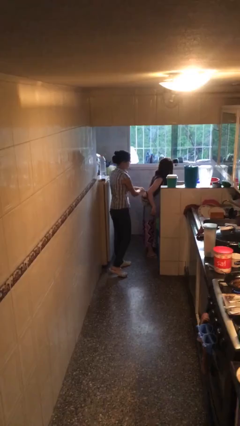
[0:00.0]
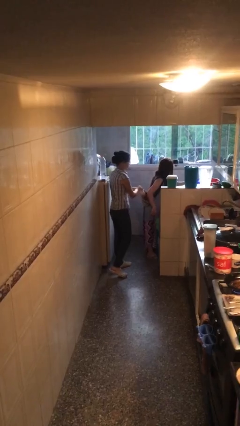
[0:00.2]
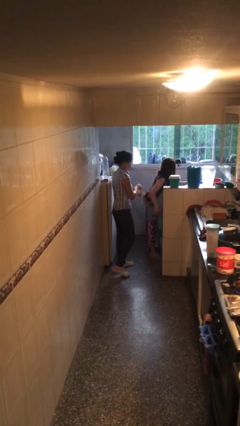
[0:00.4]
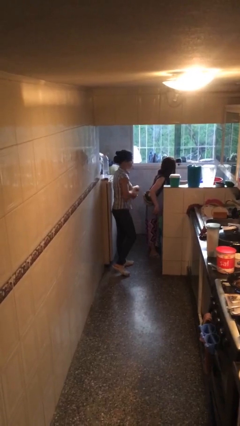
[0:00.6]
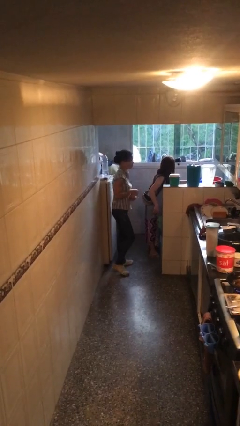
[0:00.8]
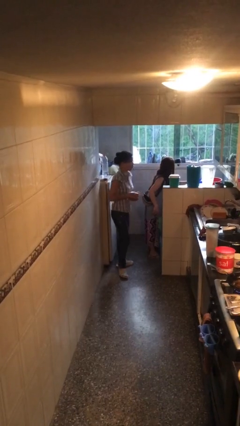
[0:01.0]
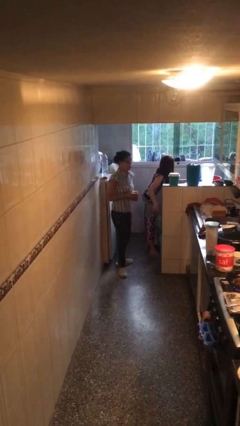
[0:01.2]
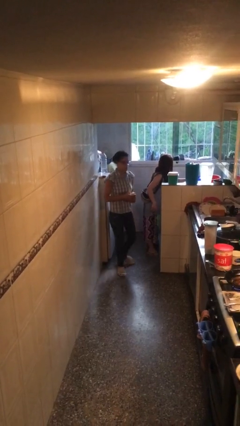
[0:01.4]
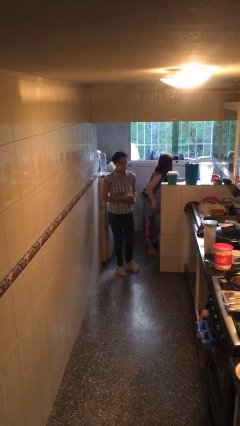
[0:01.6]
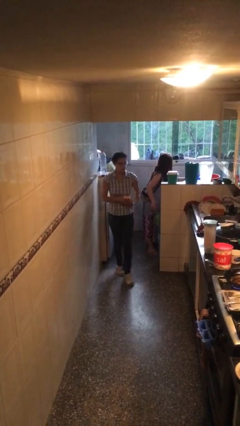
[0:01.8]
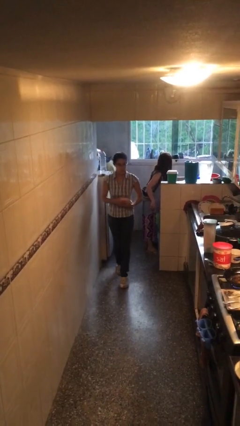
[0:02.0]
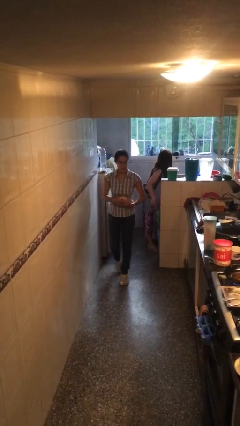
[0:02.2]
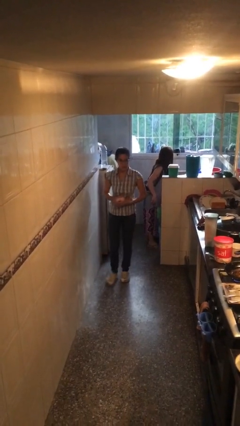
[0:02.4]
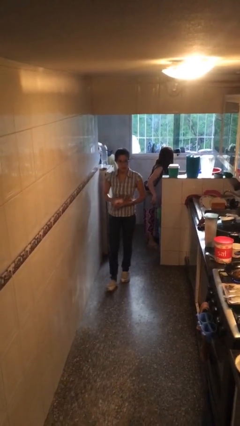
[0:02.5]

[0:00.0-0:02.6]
person steals object from person

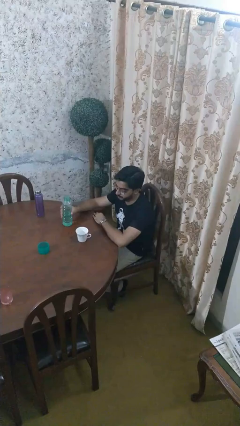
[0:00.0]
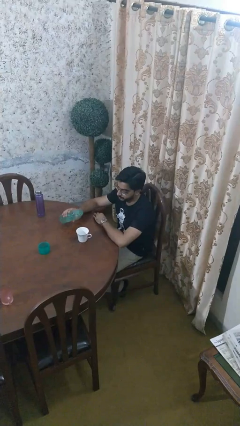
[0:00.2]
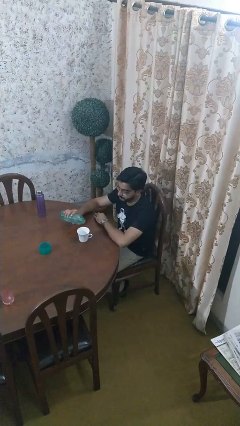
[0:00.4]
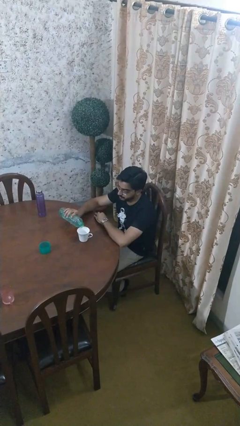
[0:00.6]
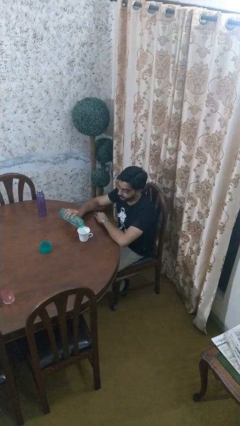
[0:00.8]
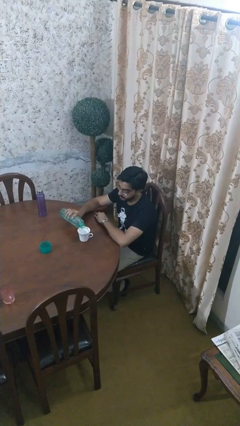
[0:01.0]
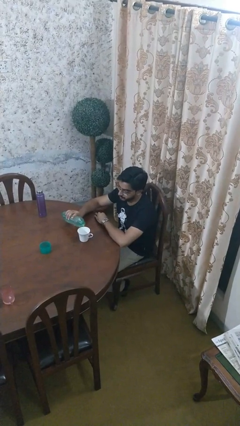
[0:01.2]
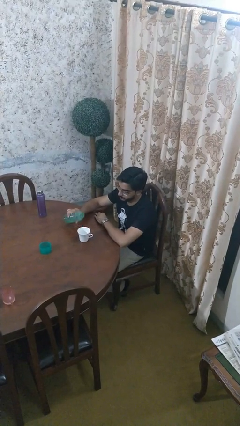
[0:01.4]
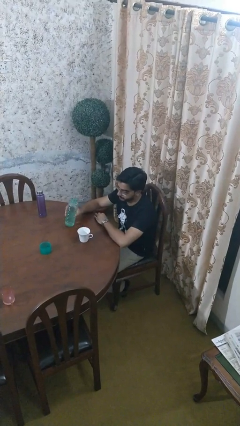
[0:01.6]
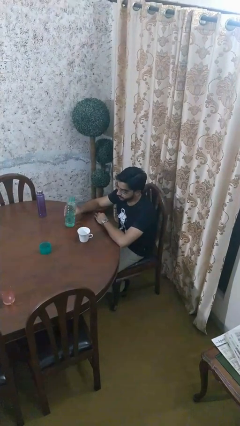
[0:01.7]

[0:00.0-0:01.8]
person pours liquid into cup

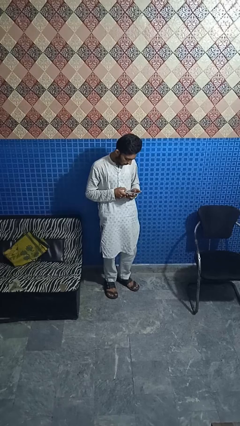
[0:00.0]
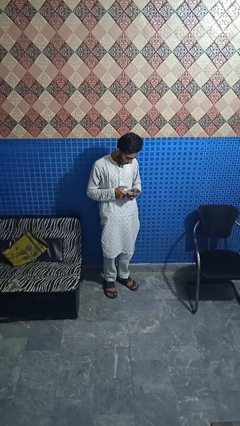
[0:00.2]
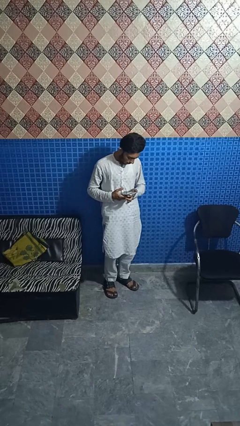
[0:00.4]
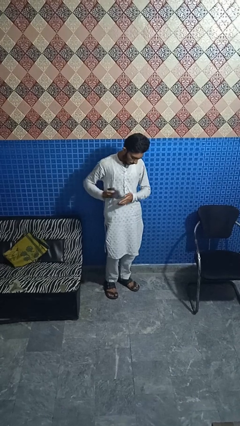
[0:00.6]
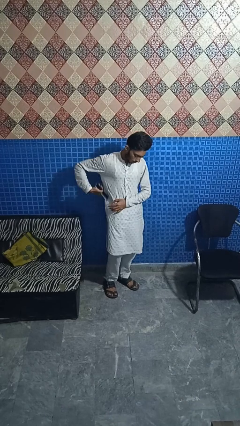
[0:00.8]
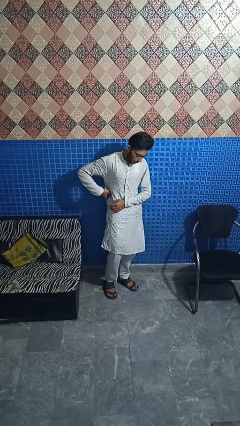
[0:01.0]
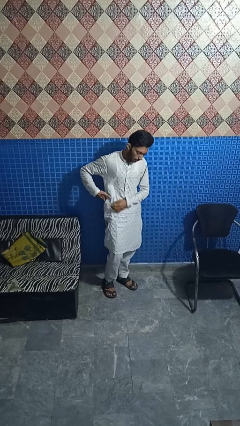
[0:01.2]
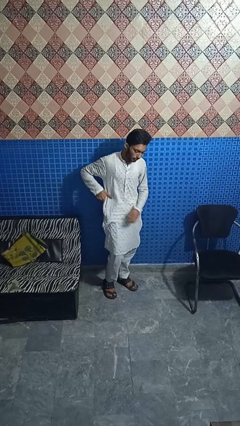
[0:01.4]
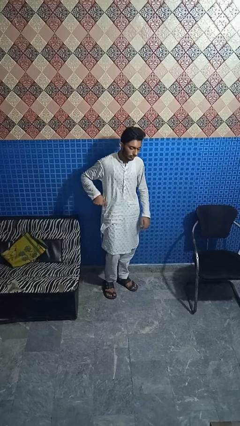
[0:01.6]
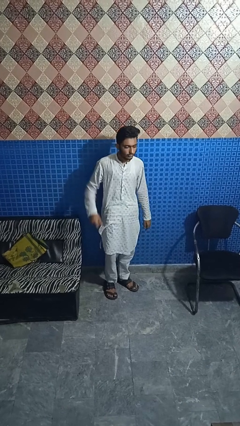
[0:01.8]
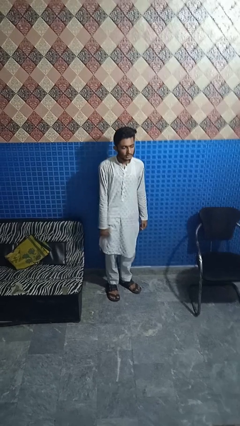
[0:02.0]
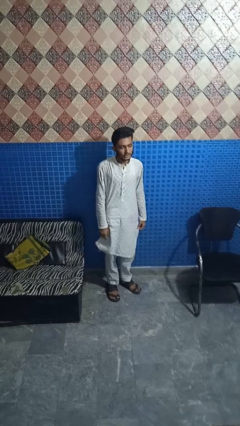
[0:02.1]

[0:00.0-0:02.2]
person puts phone into pocket

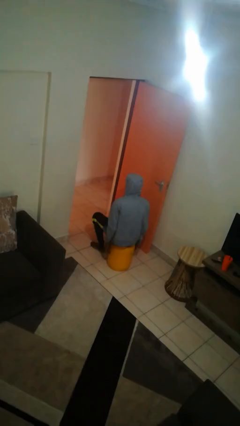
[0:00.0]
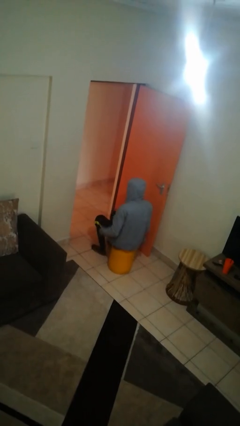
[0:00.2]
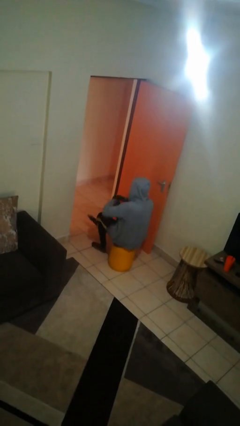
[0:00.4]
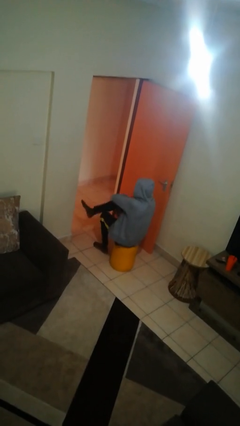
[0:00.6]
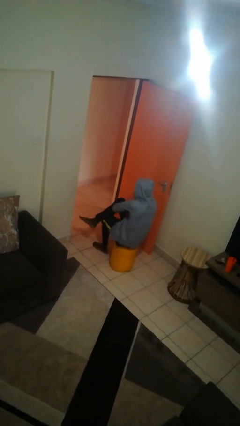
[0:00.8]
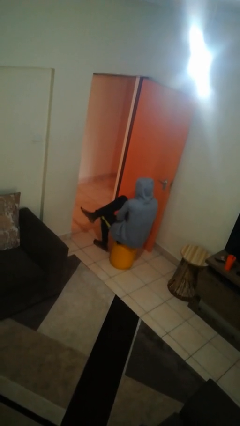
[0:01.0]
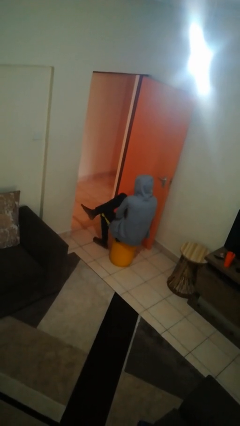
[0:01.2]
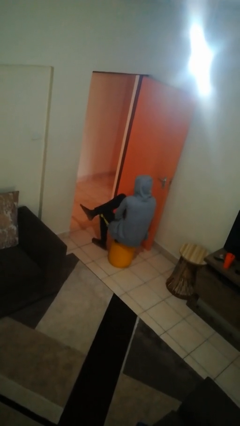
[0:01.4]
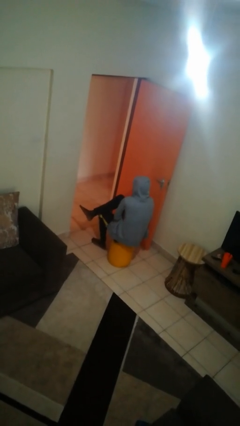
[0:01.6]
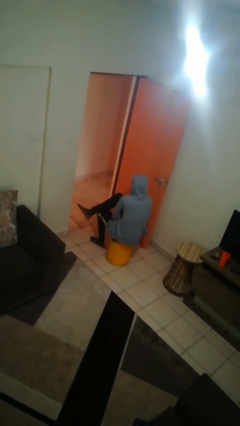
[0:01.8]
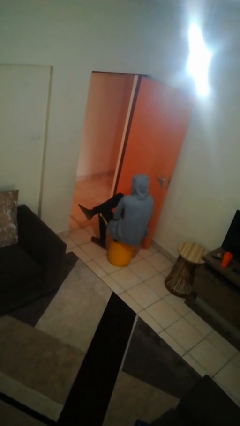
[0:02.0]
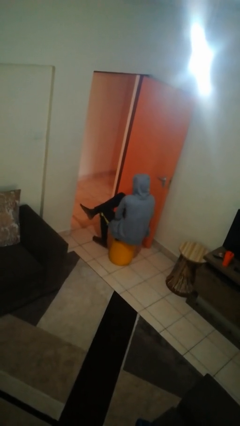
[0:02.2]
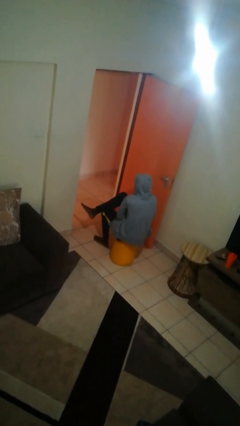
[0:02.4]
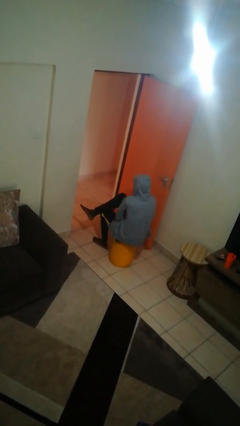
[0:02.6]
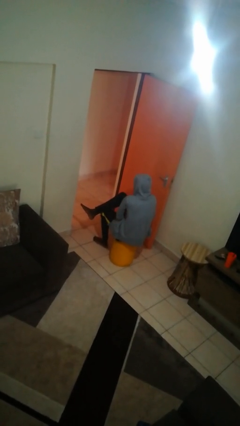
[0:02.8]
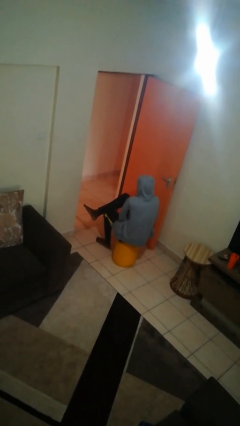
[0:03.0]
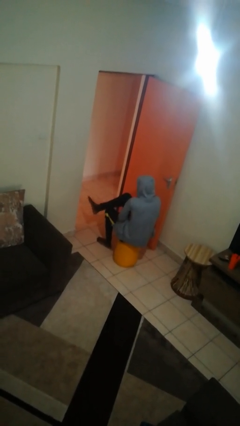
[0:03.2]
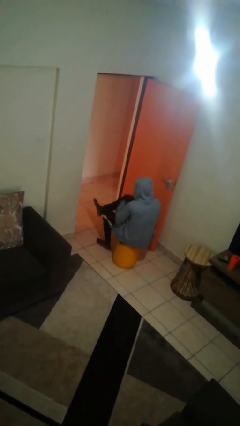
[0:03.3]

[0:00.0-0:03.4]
person crosses arms

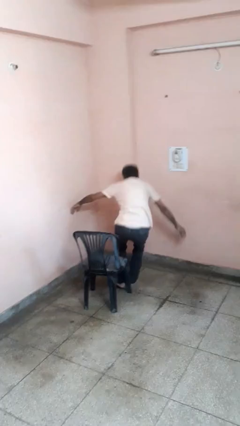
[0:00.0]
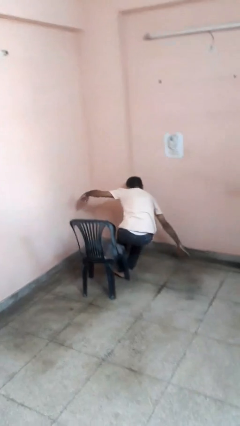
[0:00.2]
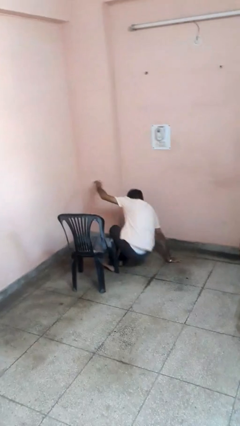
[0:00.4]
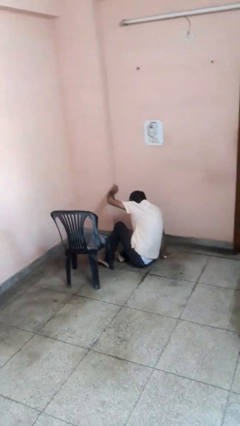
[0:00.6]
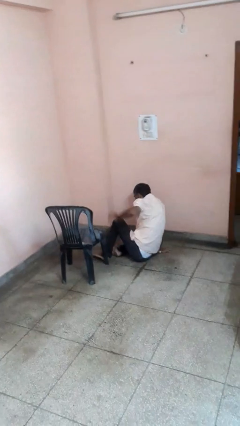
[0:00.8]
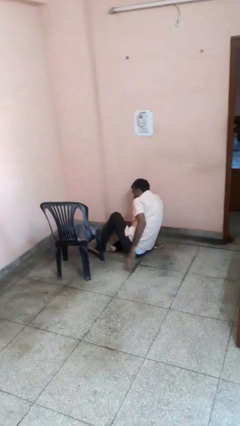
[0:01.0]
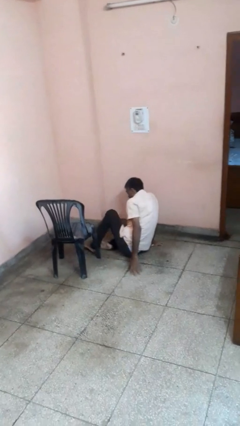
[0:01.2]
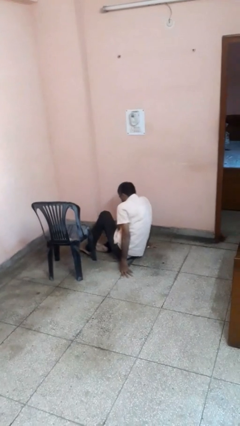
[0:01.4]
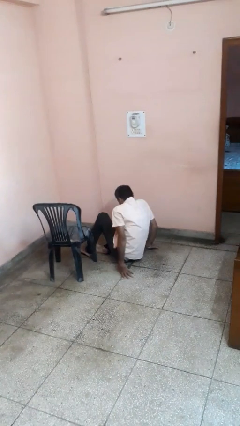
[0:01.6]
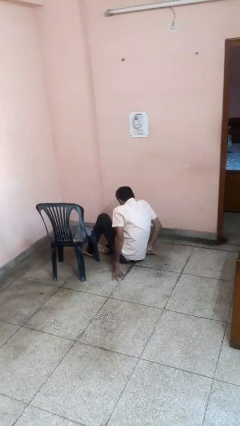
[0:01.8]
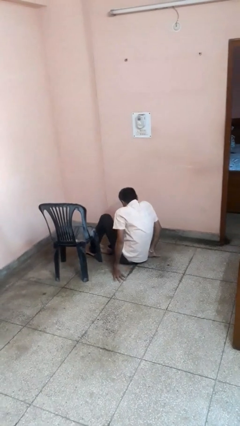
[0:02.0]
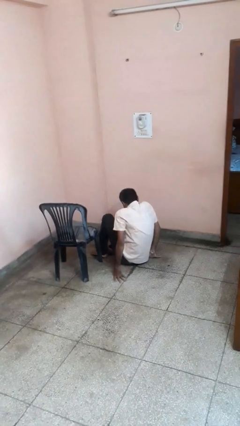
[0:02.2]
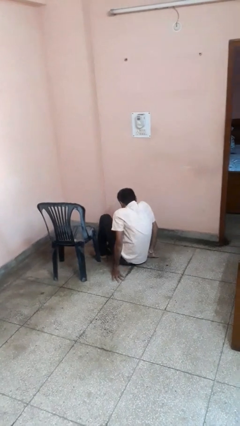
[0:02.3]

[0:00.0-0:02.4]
person falls from chair

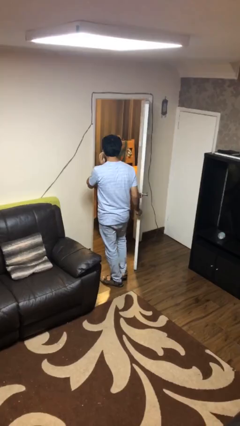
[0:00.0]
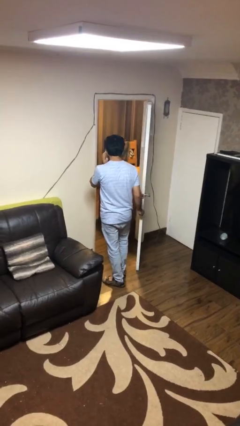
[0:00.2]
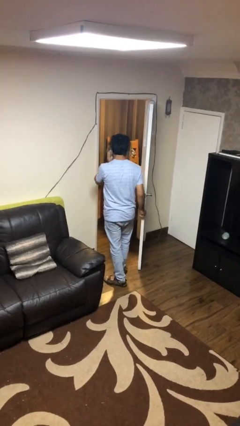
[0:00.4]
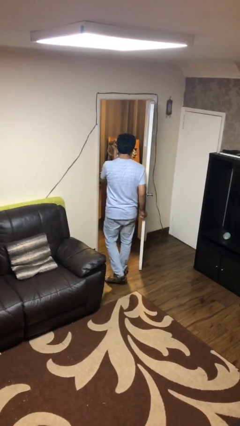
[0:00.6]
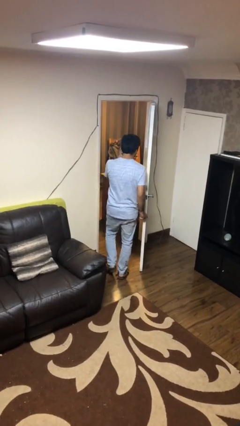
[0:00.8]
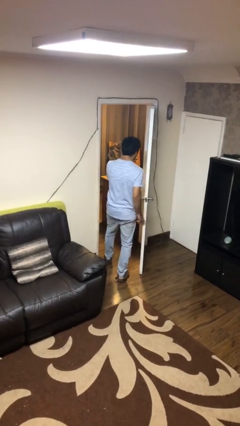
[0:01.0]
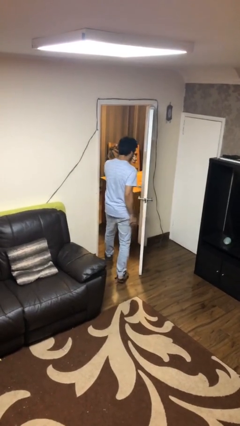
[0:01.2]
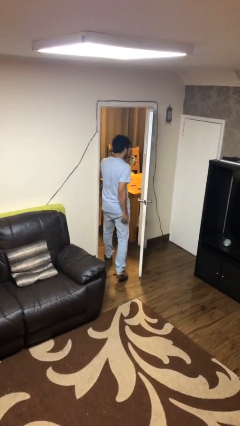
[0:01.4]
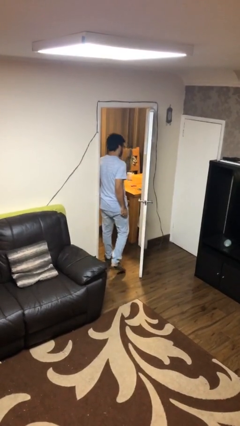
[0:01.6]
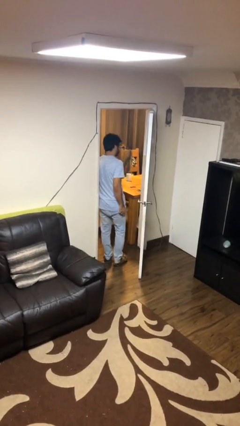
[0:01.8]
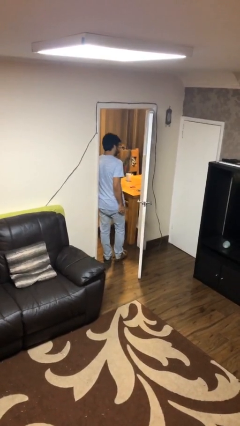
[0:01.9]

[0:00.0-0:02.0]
person exits scene through structure

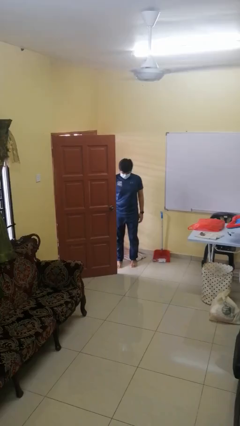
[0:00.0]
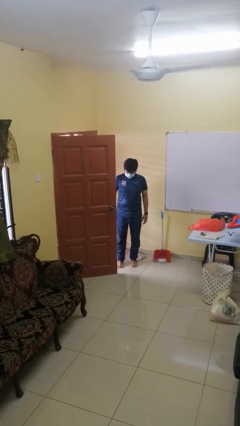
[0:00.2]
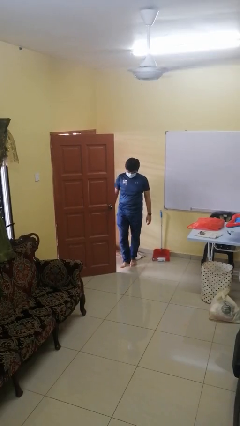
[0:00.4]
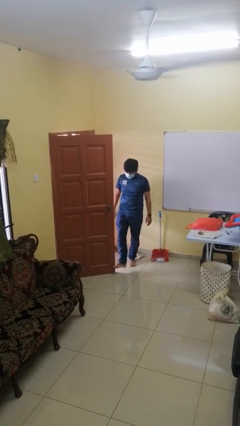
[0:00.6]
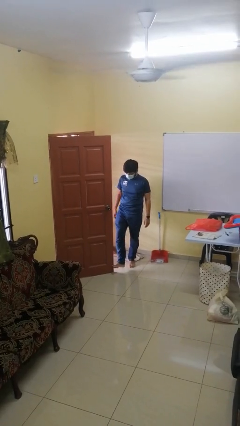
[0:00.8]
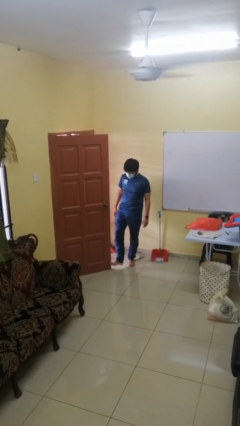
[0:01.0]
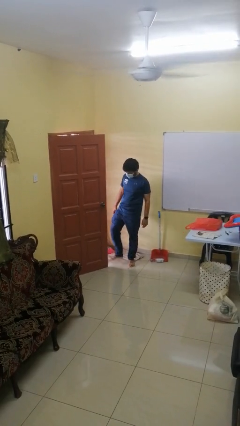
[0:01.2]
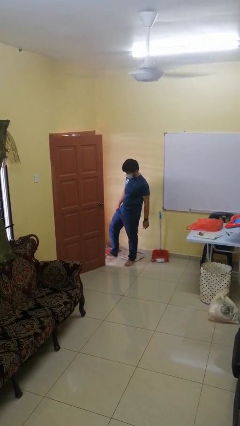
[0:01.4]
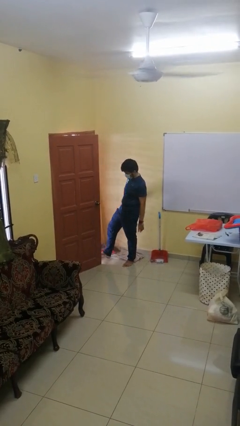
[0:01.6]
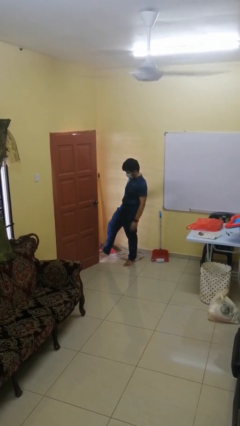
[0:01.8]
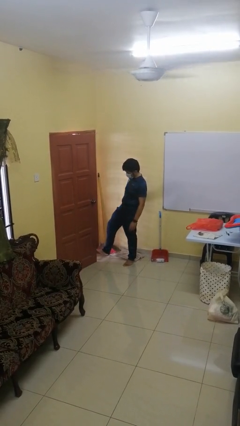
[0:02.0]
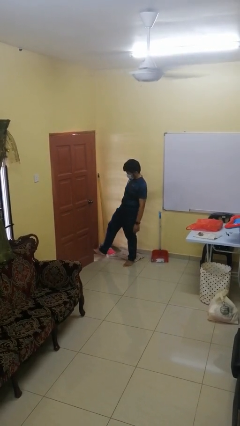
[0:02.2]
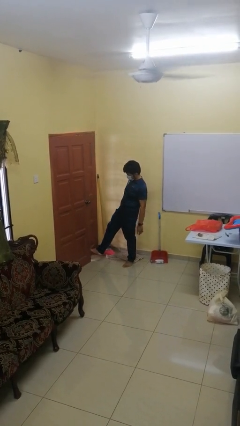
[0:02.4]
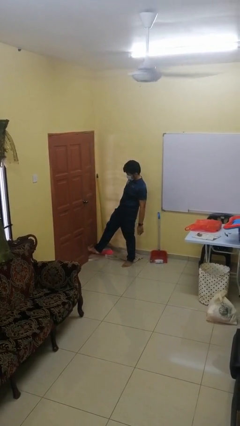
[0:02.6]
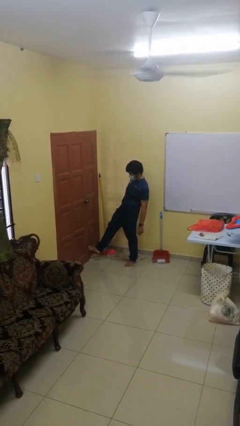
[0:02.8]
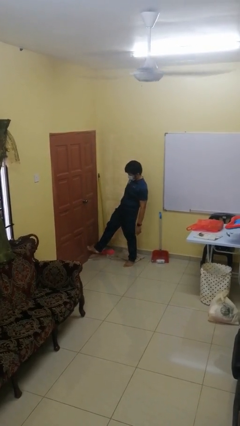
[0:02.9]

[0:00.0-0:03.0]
person closes door with foot
